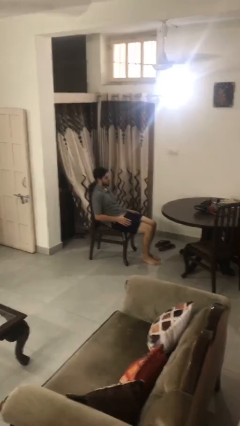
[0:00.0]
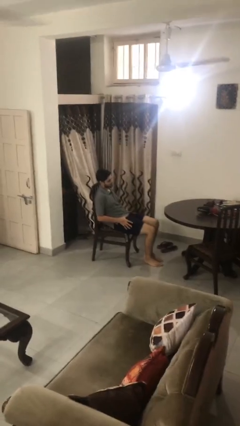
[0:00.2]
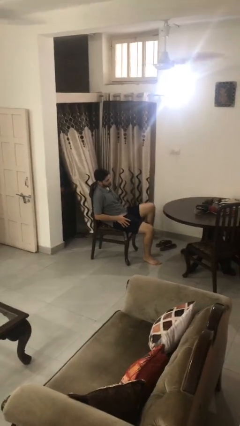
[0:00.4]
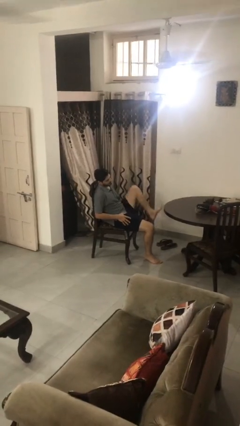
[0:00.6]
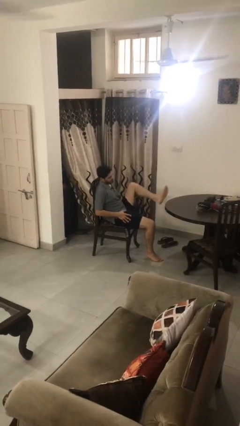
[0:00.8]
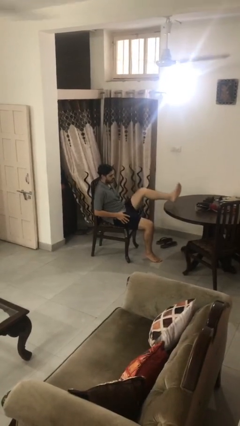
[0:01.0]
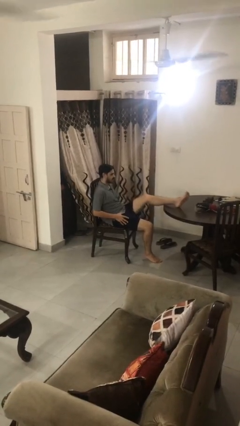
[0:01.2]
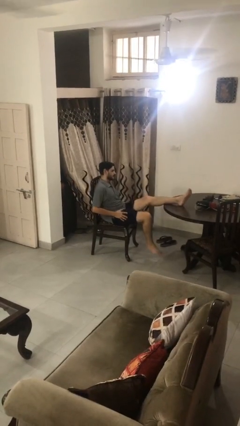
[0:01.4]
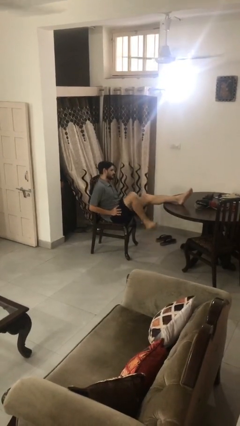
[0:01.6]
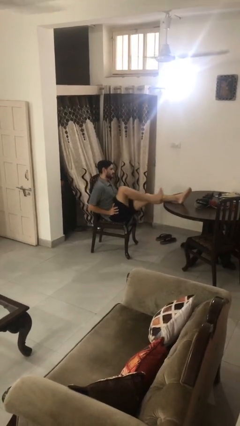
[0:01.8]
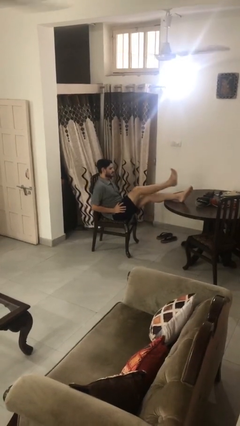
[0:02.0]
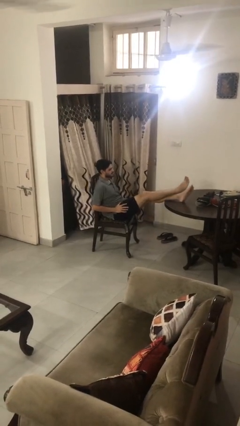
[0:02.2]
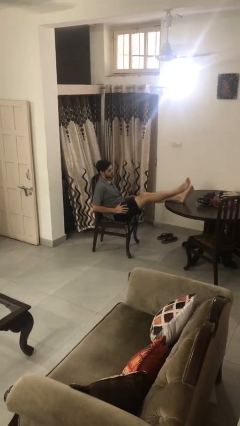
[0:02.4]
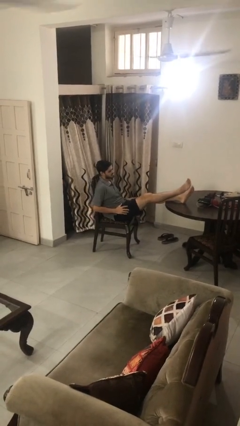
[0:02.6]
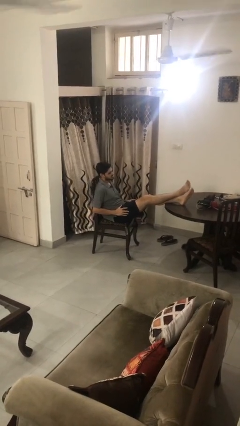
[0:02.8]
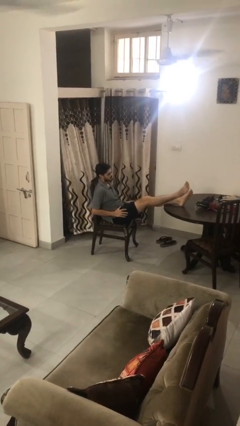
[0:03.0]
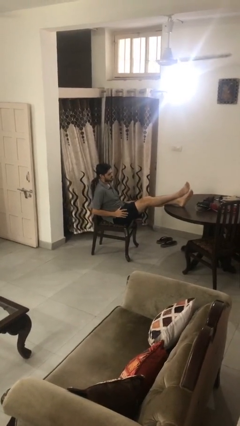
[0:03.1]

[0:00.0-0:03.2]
person puts feet up

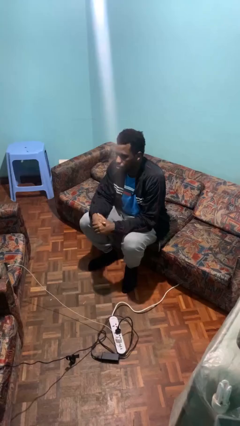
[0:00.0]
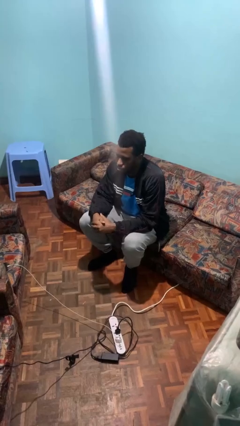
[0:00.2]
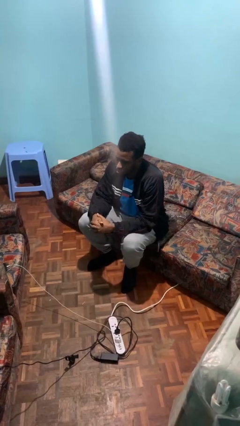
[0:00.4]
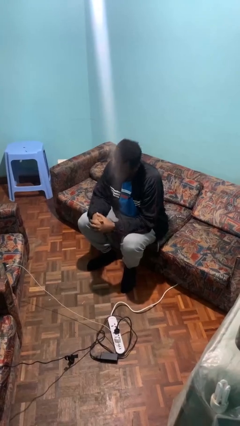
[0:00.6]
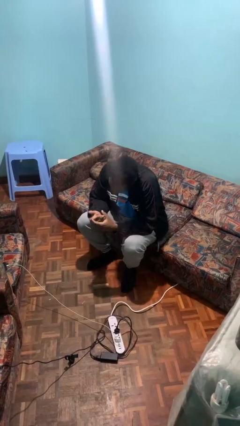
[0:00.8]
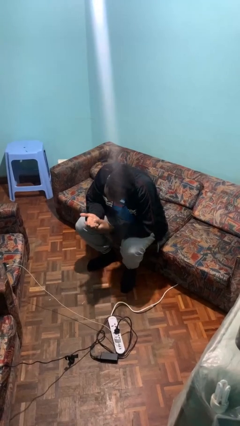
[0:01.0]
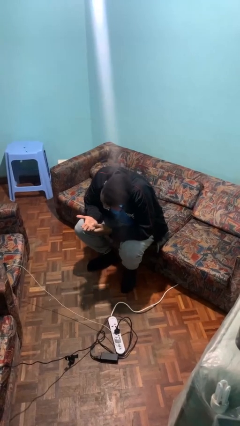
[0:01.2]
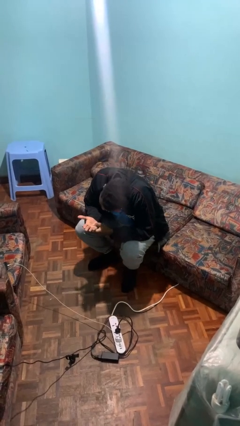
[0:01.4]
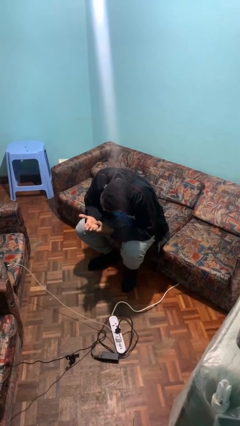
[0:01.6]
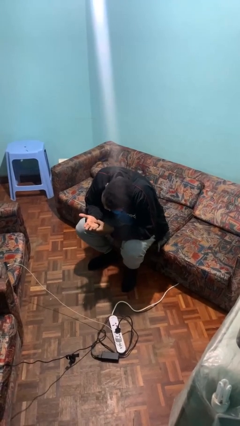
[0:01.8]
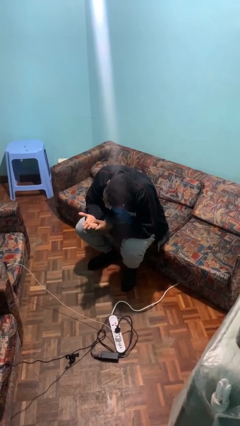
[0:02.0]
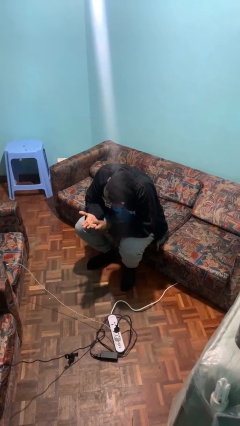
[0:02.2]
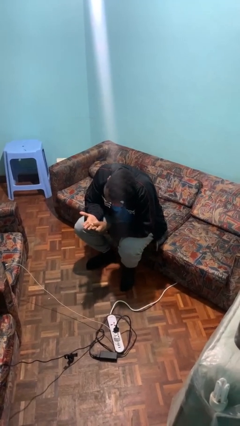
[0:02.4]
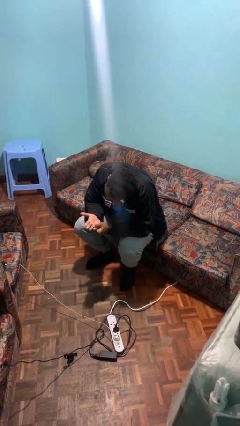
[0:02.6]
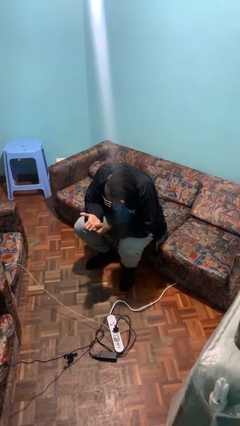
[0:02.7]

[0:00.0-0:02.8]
person looks at hands in lap

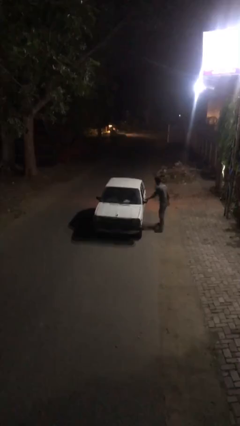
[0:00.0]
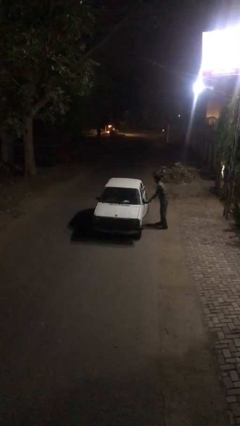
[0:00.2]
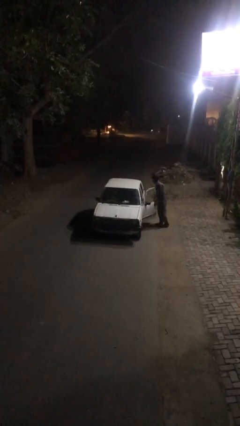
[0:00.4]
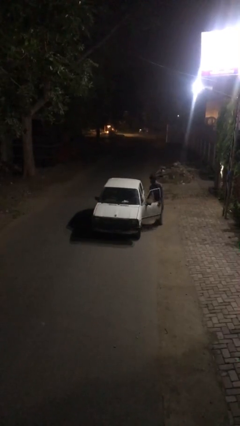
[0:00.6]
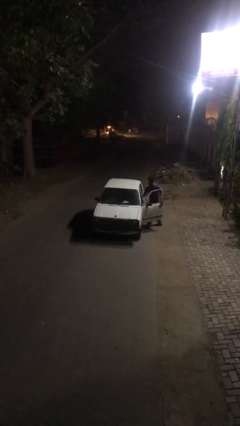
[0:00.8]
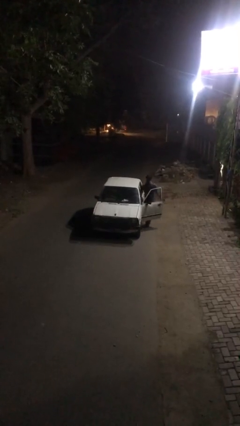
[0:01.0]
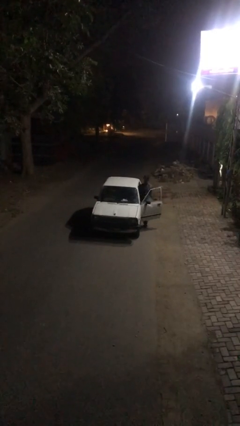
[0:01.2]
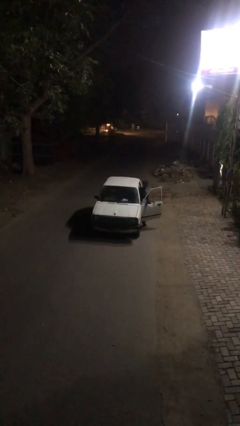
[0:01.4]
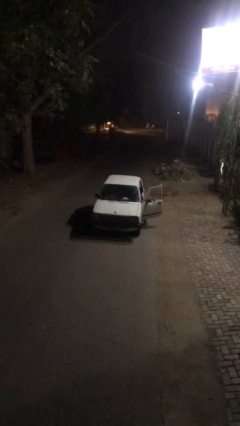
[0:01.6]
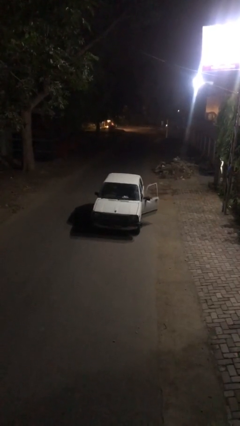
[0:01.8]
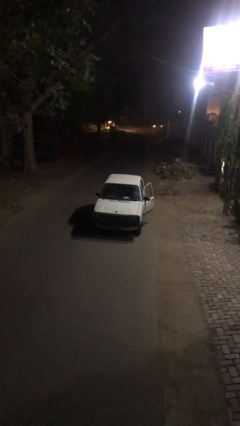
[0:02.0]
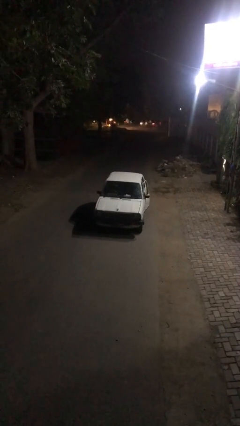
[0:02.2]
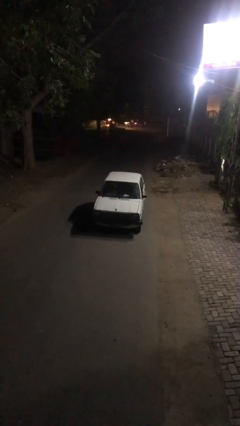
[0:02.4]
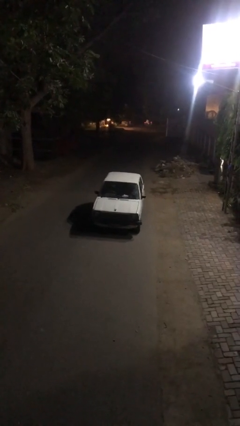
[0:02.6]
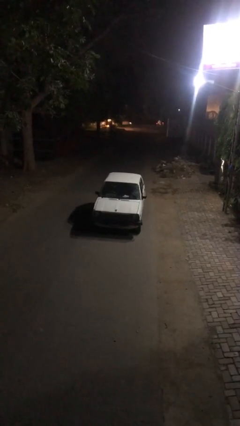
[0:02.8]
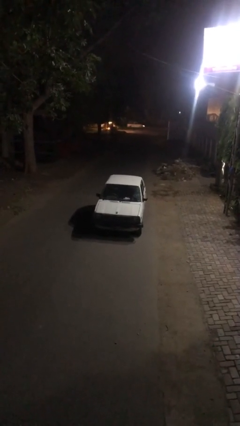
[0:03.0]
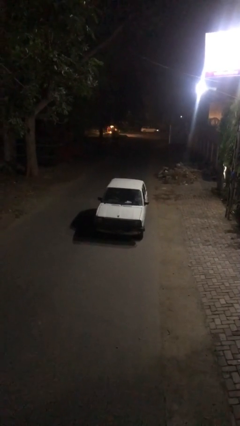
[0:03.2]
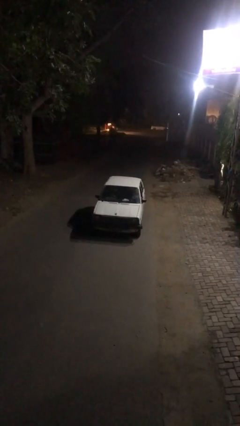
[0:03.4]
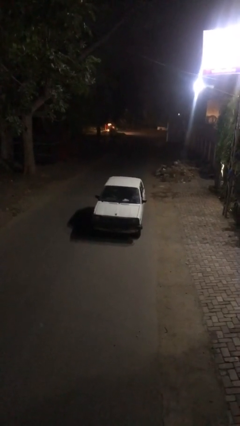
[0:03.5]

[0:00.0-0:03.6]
car picks up person

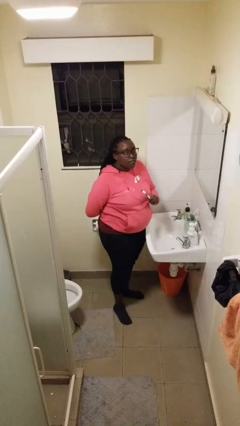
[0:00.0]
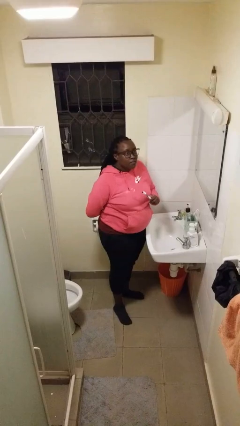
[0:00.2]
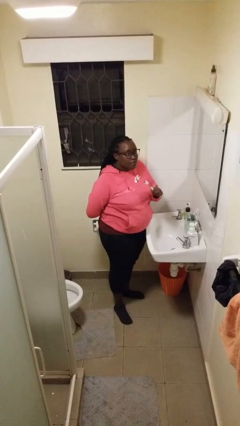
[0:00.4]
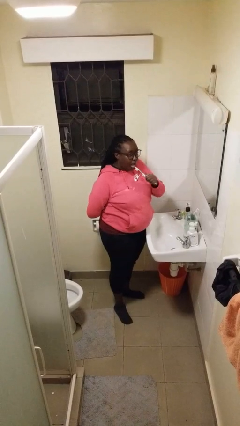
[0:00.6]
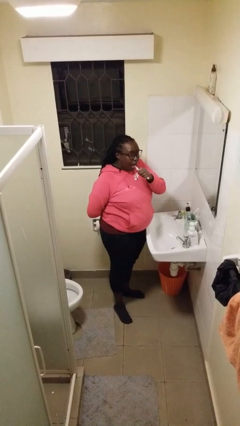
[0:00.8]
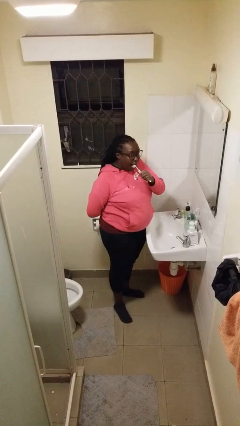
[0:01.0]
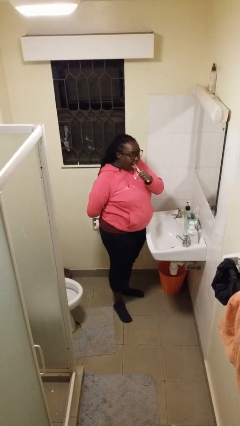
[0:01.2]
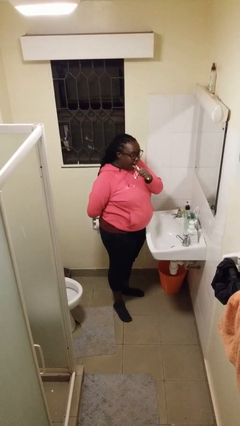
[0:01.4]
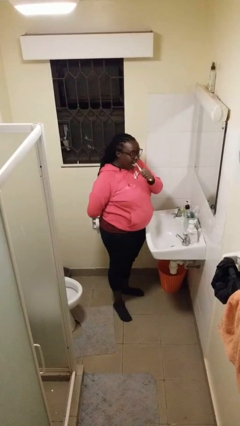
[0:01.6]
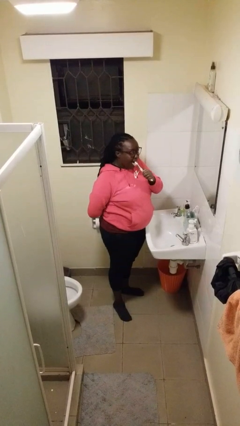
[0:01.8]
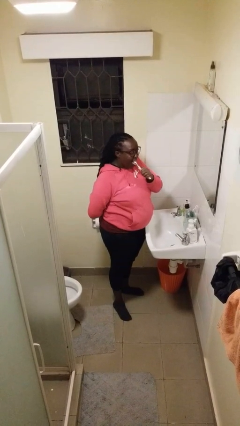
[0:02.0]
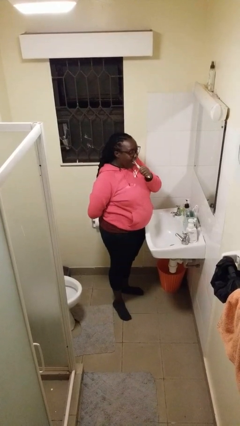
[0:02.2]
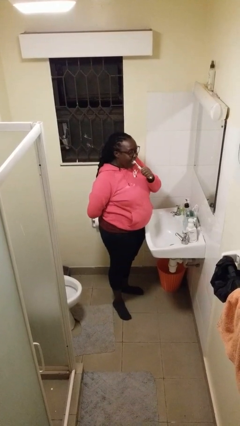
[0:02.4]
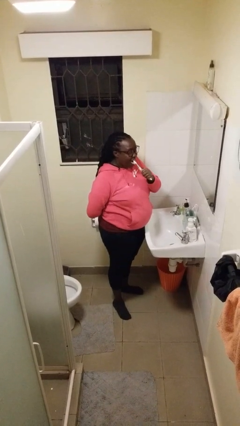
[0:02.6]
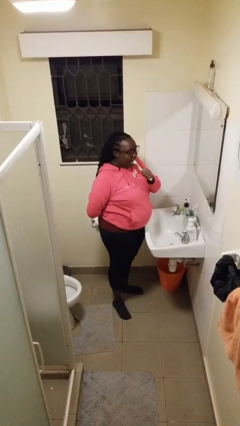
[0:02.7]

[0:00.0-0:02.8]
person brushes teeth

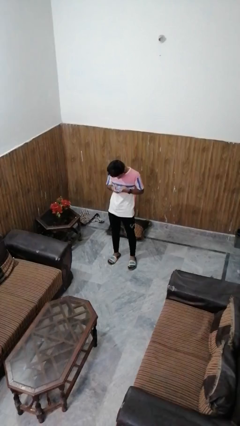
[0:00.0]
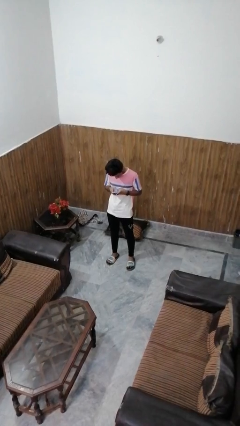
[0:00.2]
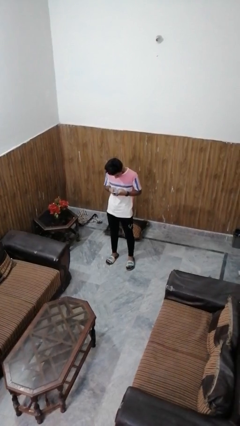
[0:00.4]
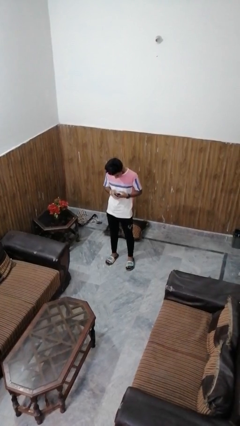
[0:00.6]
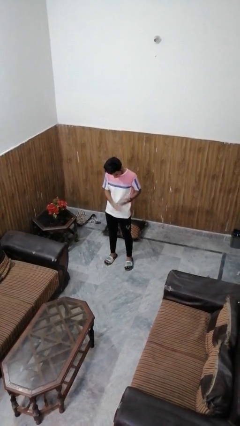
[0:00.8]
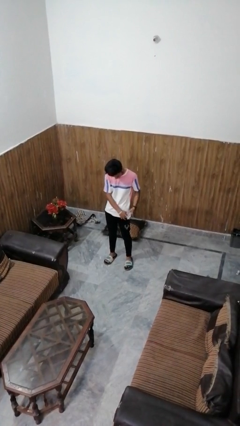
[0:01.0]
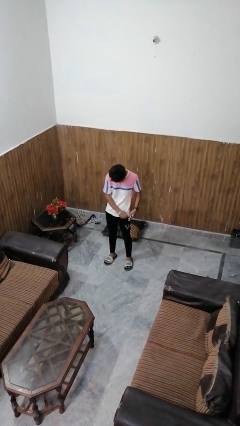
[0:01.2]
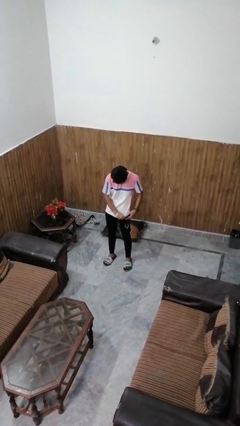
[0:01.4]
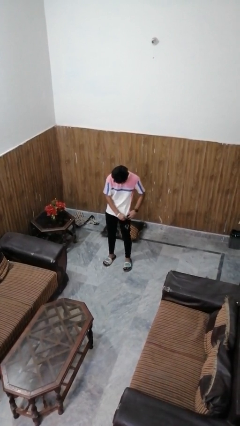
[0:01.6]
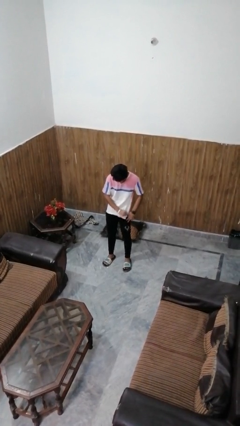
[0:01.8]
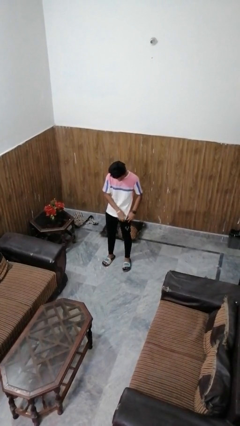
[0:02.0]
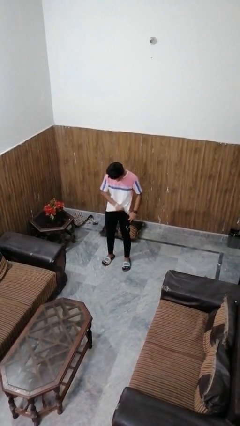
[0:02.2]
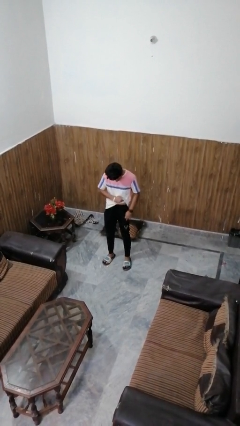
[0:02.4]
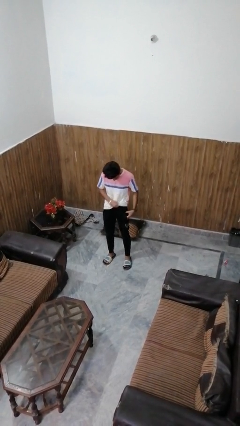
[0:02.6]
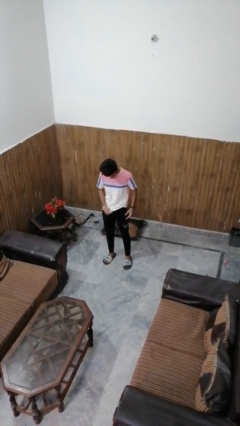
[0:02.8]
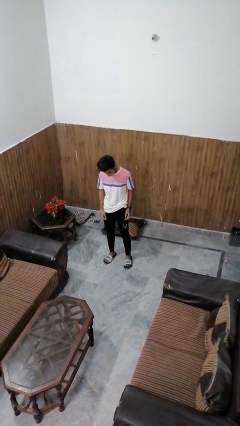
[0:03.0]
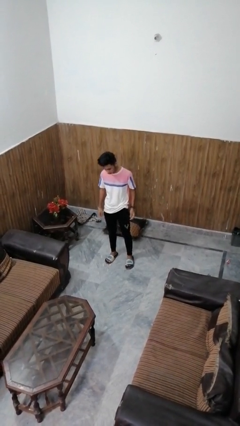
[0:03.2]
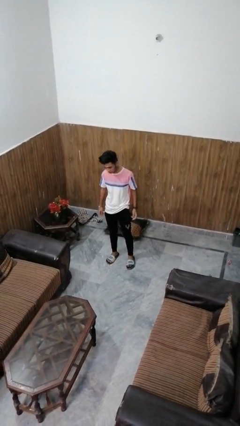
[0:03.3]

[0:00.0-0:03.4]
person puts phone into pocket

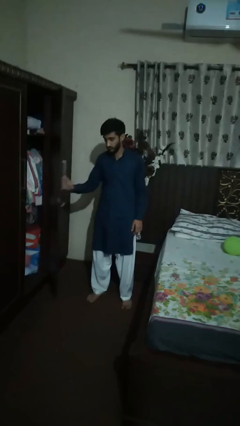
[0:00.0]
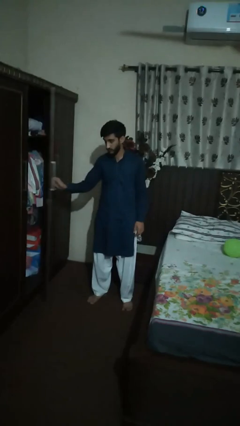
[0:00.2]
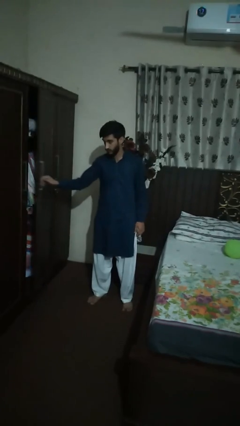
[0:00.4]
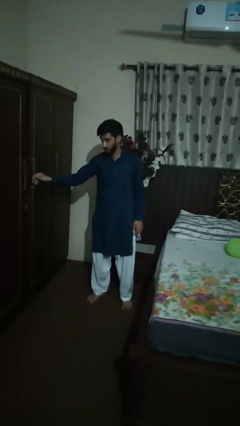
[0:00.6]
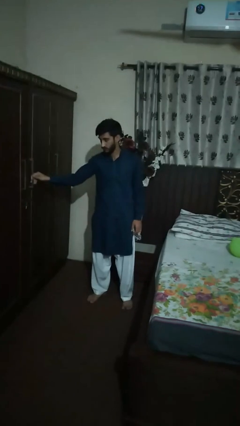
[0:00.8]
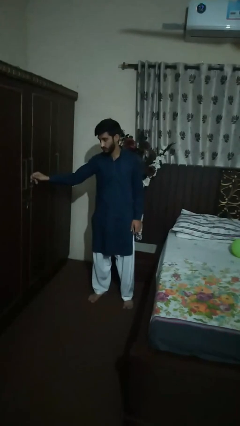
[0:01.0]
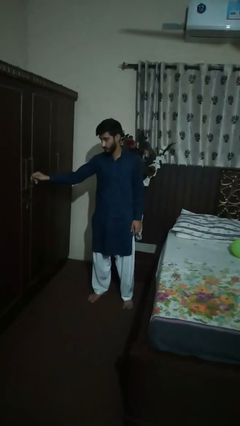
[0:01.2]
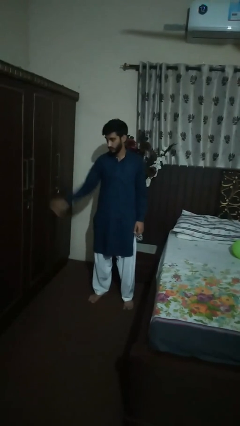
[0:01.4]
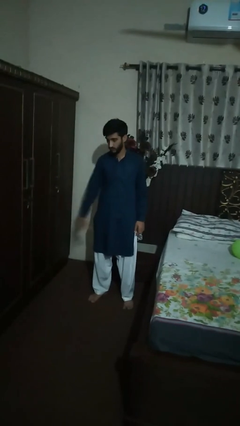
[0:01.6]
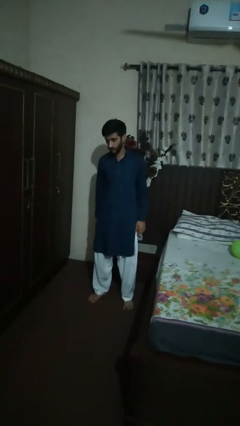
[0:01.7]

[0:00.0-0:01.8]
person closes dresser drawer
